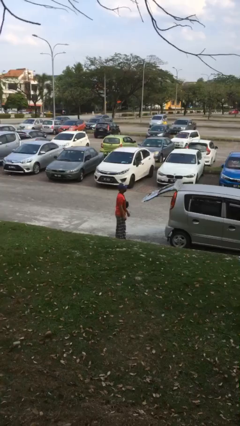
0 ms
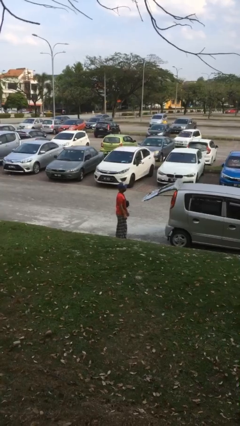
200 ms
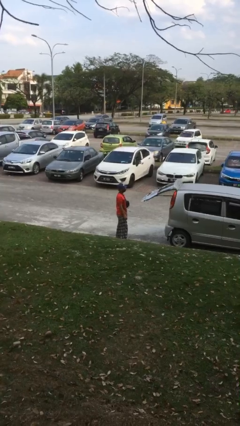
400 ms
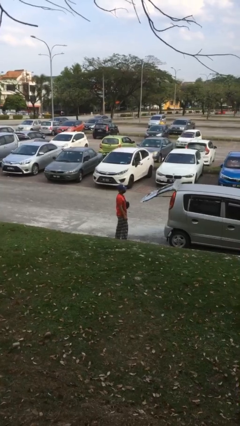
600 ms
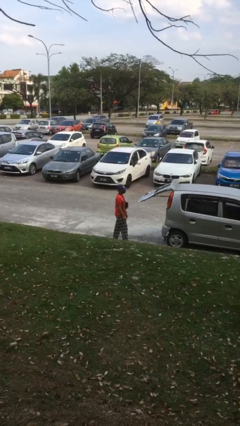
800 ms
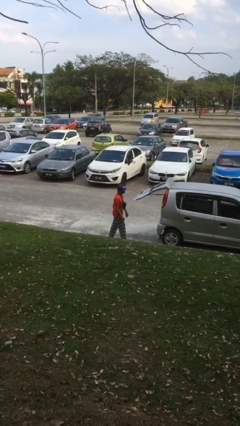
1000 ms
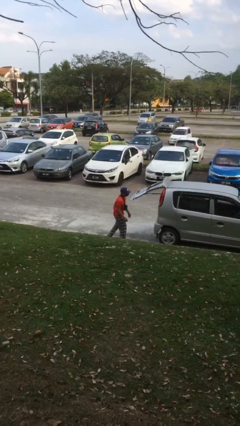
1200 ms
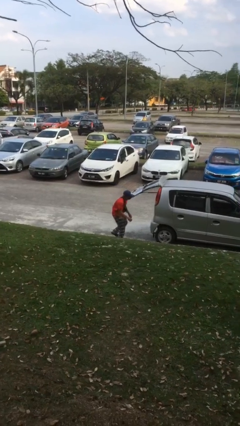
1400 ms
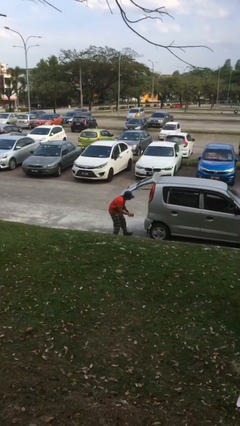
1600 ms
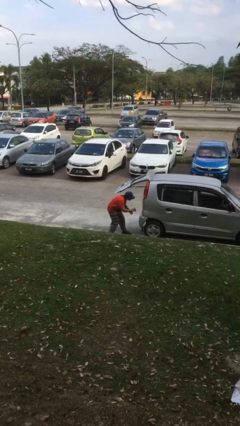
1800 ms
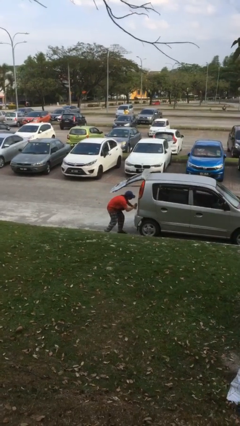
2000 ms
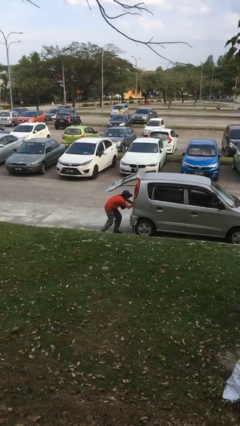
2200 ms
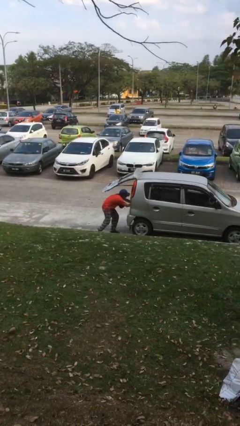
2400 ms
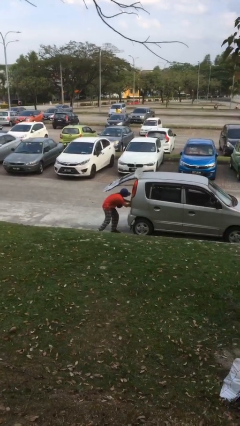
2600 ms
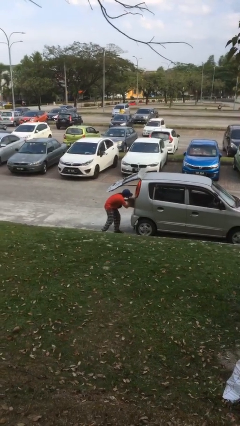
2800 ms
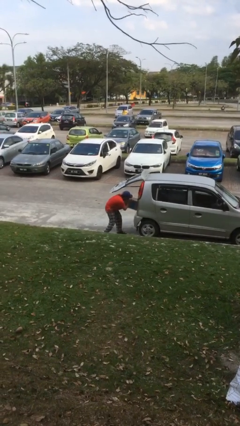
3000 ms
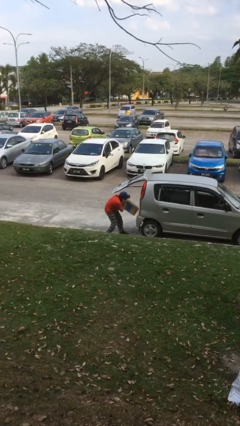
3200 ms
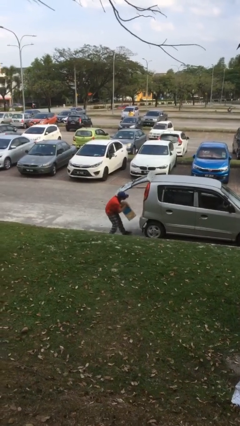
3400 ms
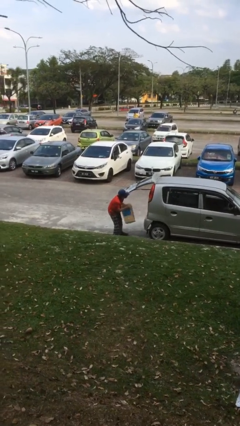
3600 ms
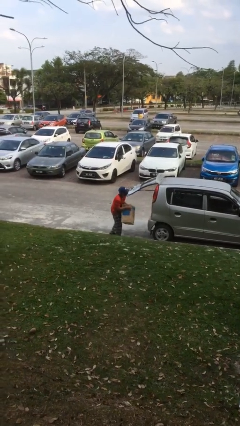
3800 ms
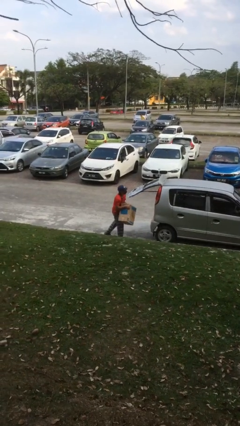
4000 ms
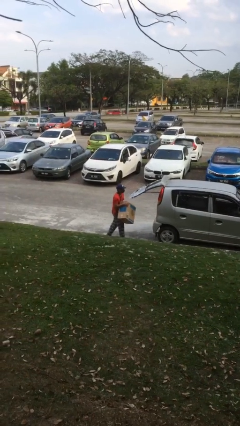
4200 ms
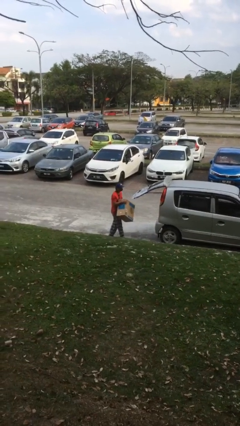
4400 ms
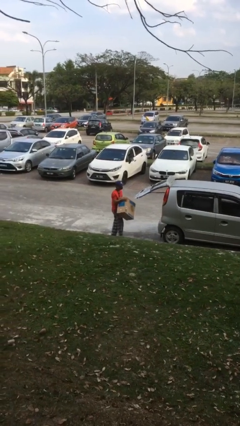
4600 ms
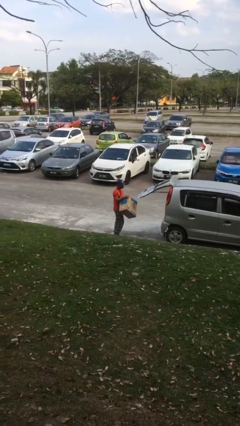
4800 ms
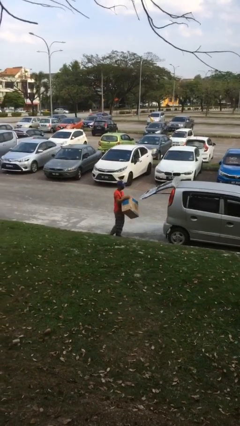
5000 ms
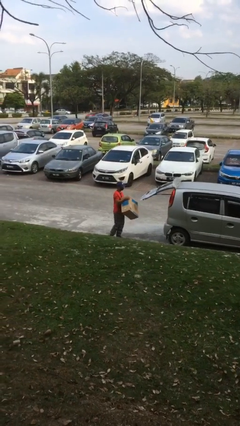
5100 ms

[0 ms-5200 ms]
person unloads car

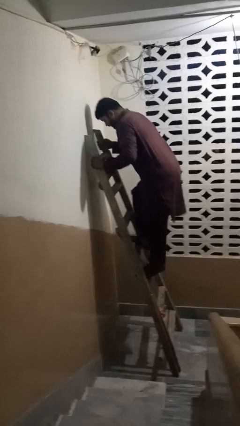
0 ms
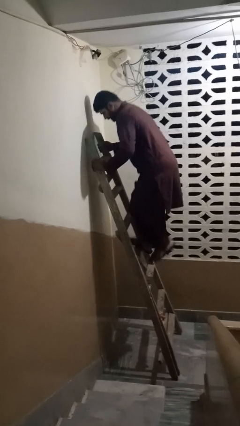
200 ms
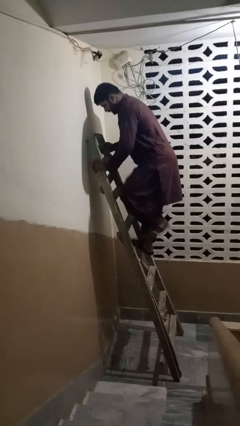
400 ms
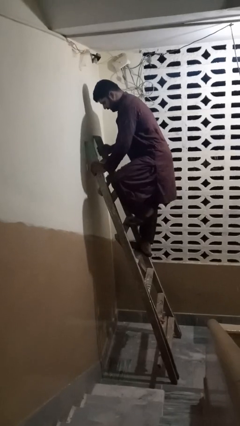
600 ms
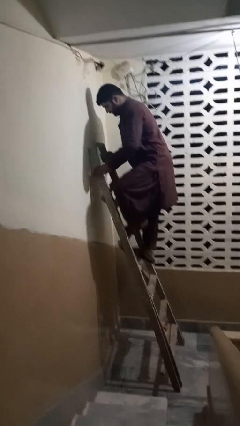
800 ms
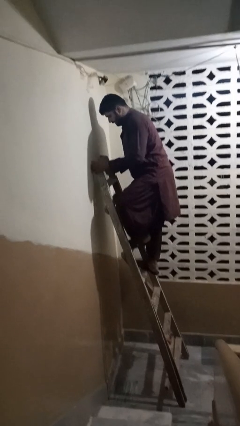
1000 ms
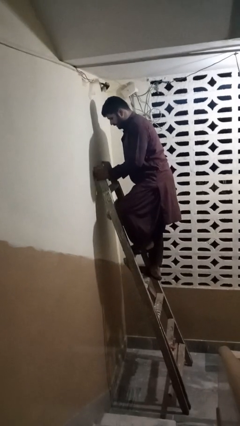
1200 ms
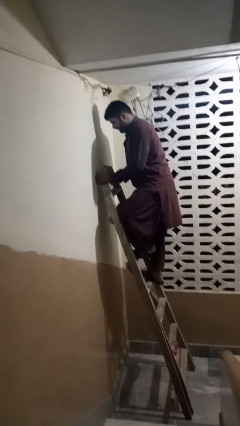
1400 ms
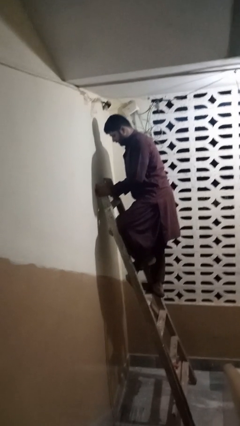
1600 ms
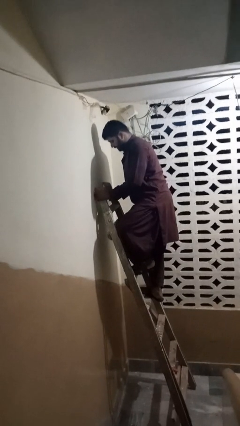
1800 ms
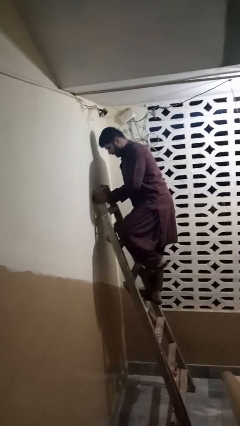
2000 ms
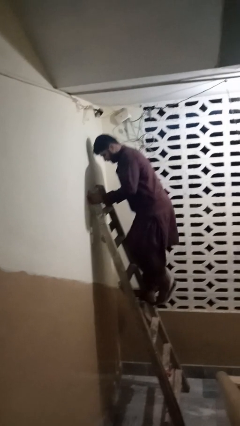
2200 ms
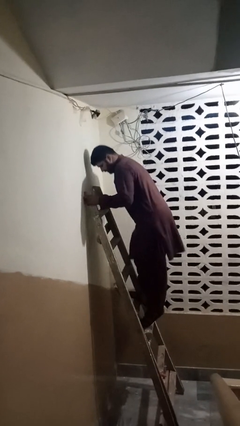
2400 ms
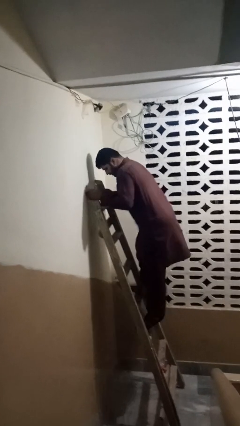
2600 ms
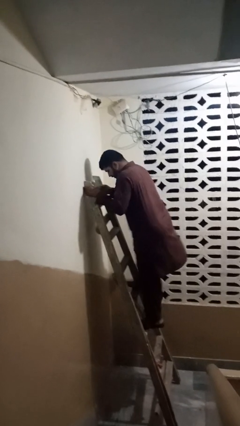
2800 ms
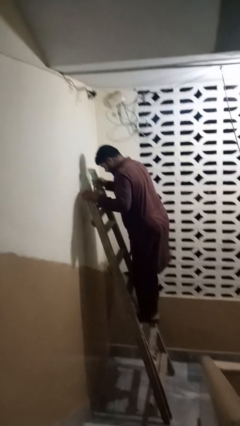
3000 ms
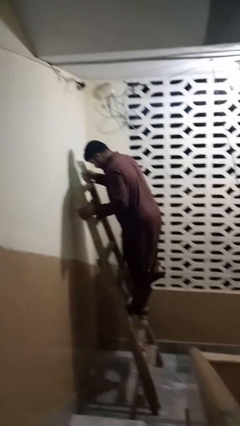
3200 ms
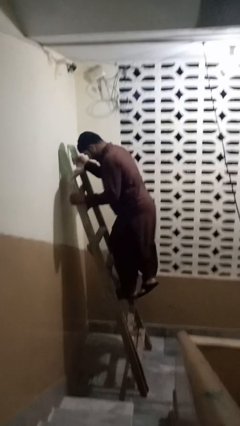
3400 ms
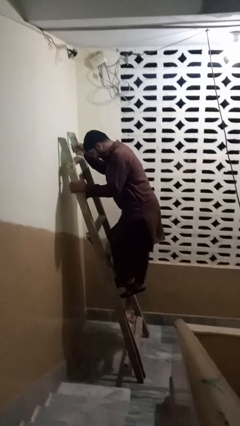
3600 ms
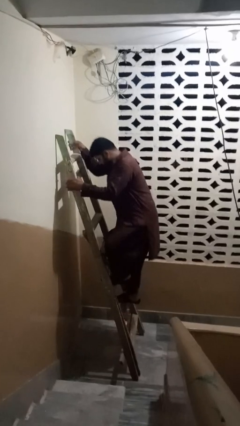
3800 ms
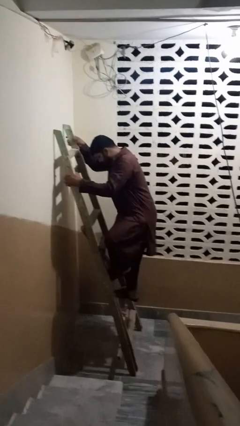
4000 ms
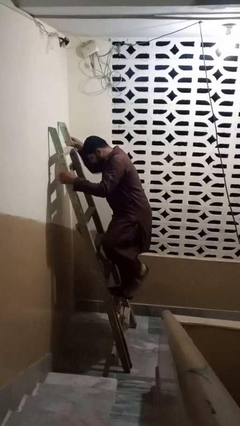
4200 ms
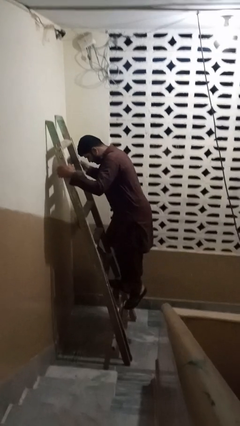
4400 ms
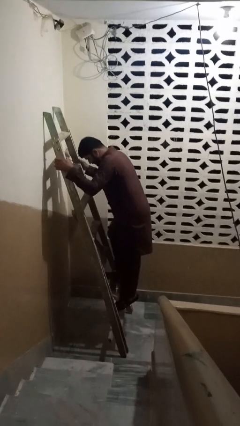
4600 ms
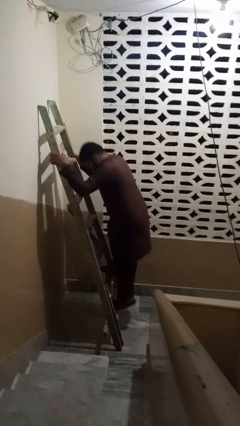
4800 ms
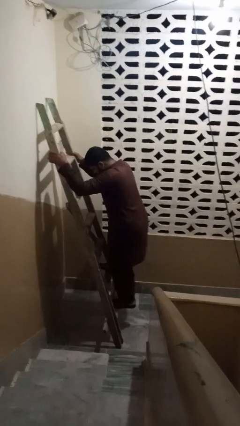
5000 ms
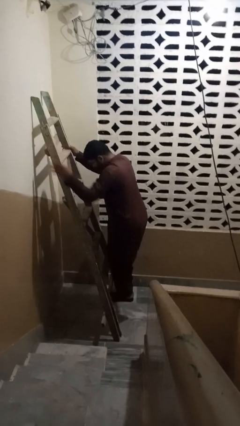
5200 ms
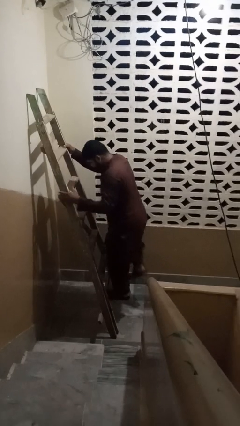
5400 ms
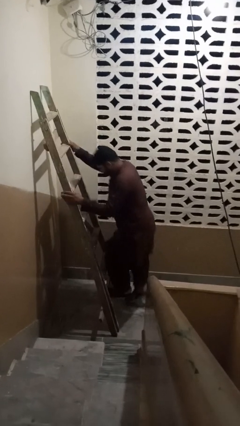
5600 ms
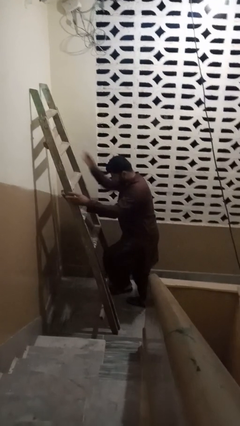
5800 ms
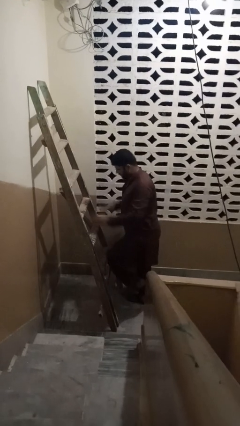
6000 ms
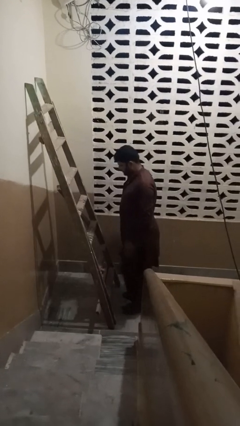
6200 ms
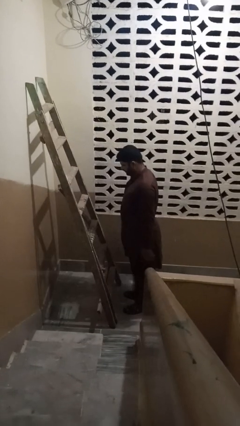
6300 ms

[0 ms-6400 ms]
person climbs down ladder

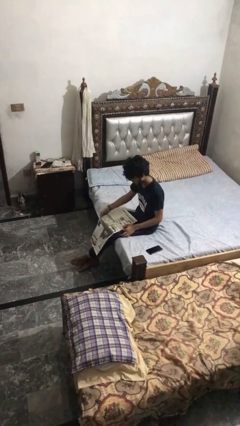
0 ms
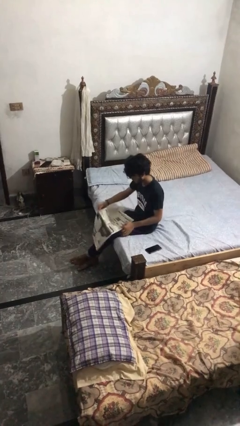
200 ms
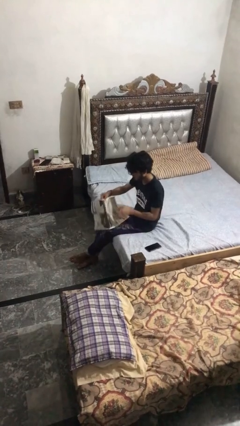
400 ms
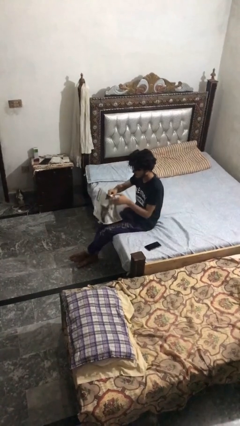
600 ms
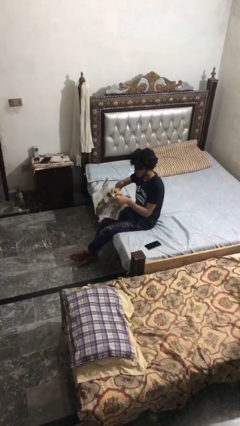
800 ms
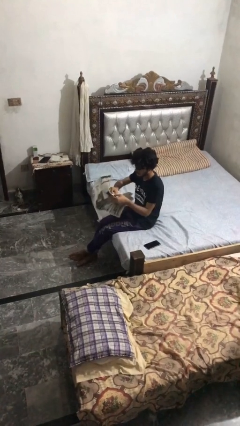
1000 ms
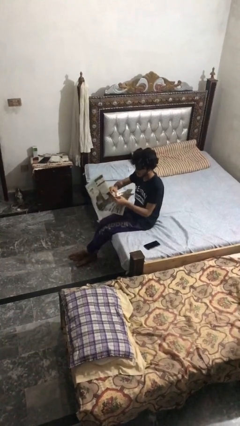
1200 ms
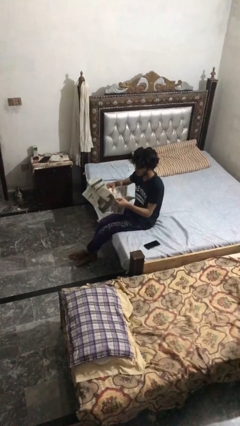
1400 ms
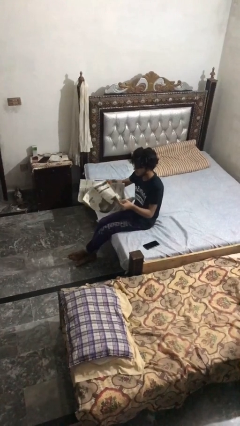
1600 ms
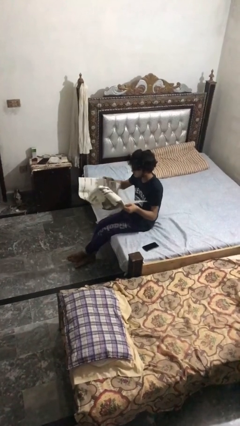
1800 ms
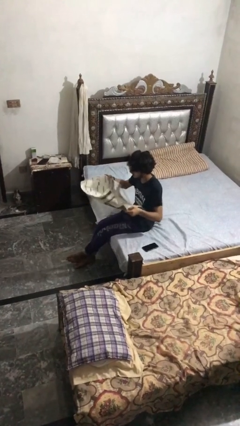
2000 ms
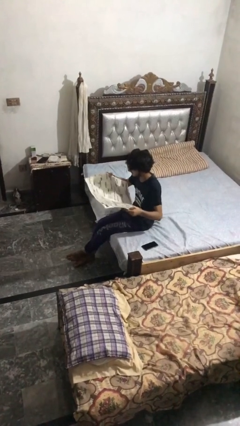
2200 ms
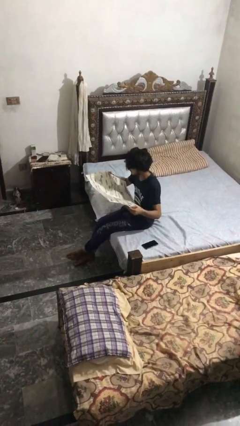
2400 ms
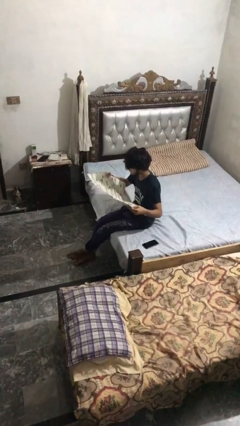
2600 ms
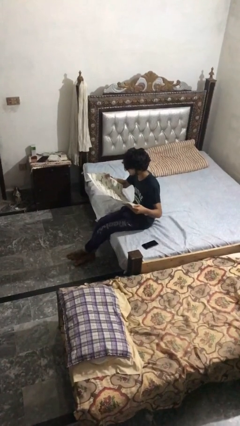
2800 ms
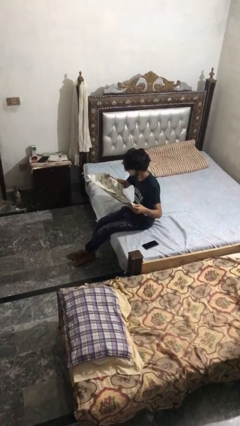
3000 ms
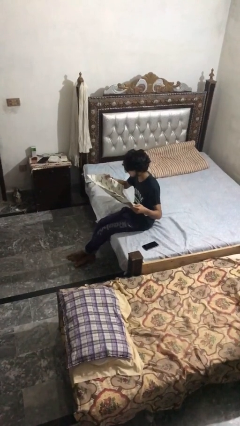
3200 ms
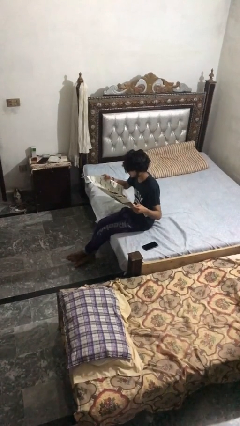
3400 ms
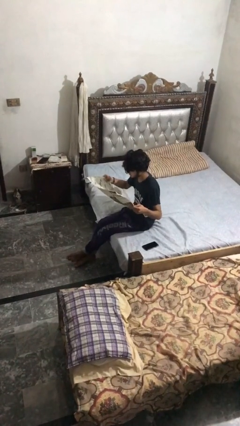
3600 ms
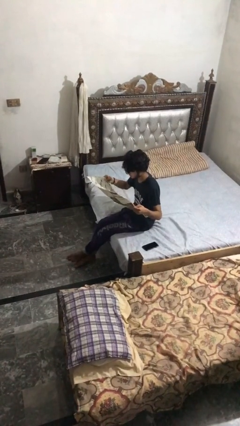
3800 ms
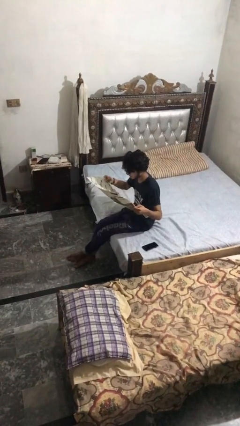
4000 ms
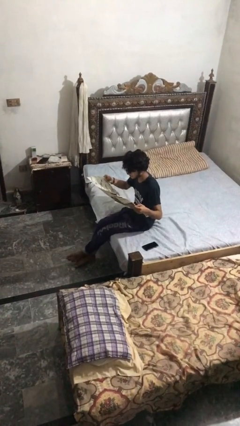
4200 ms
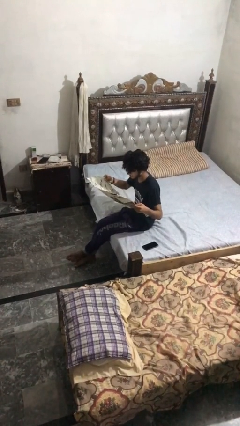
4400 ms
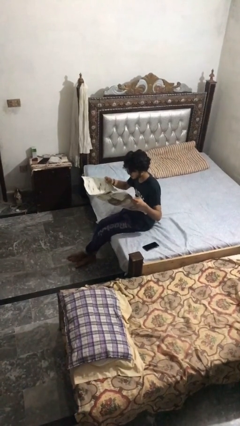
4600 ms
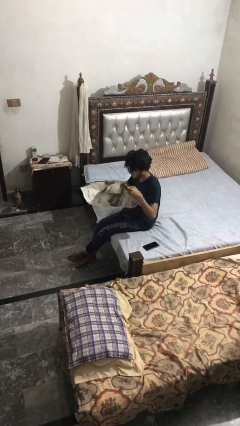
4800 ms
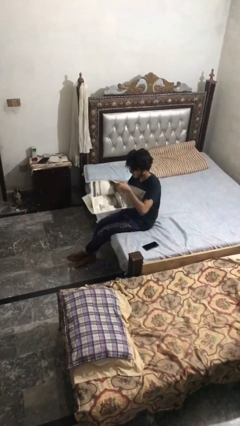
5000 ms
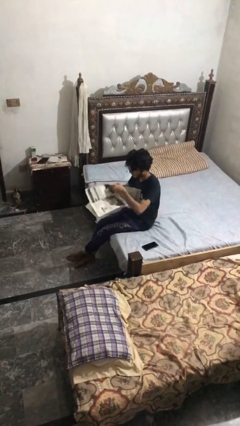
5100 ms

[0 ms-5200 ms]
person reads newspaper

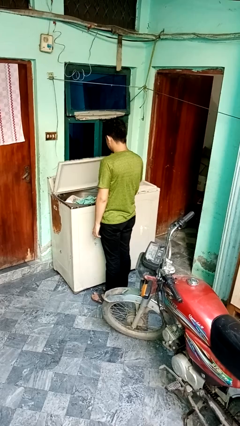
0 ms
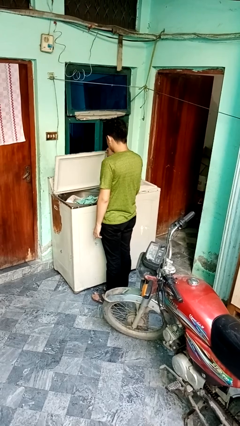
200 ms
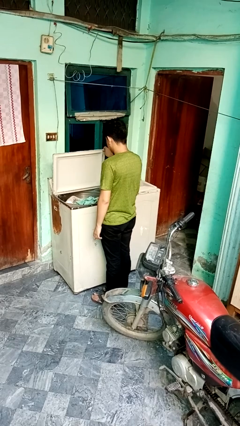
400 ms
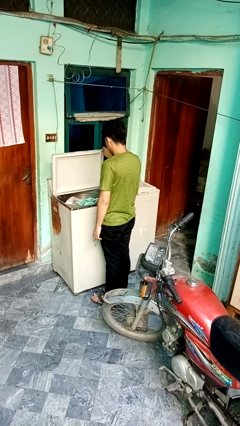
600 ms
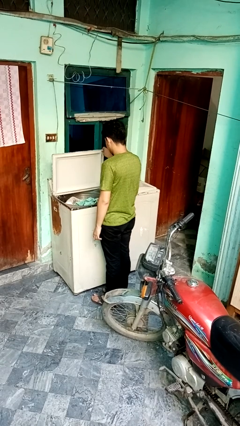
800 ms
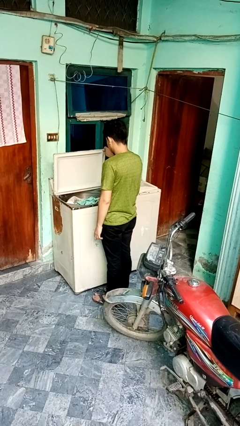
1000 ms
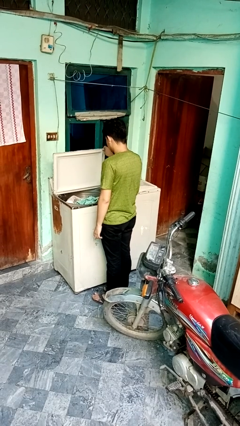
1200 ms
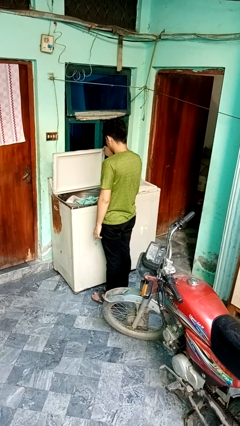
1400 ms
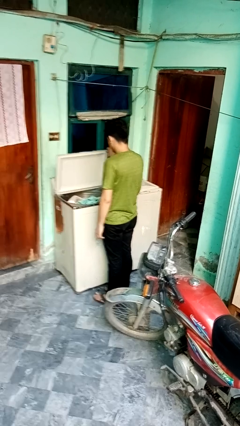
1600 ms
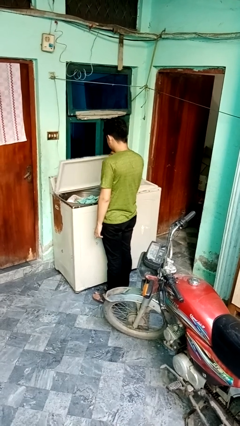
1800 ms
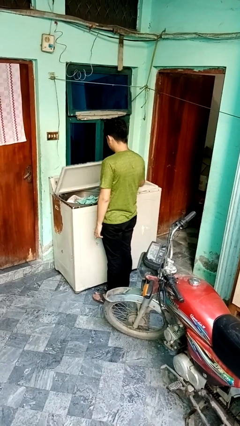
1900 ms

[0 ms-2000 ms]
person opens clothes washer
